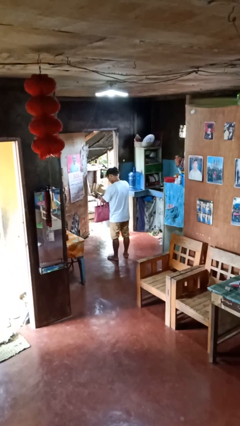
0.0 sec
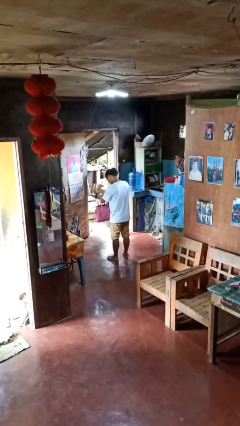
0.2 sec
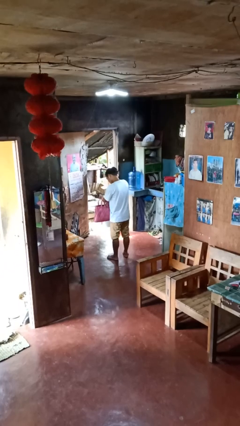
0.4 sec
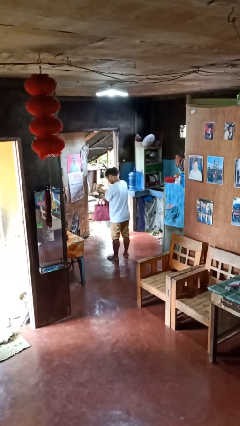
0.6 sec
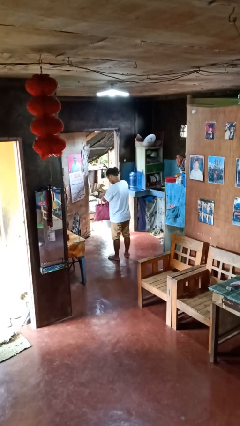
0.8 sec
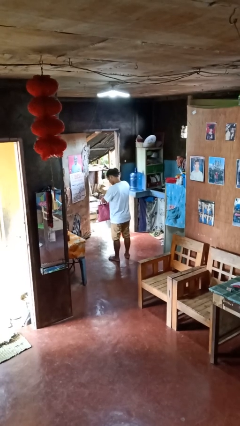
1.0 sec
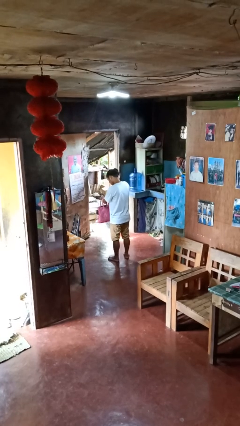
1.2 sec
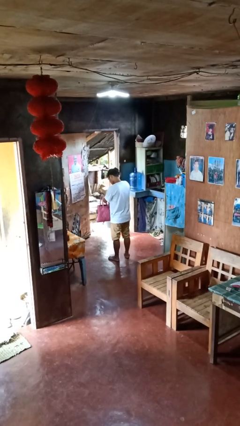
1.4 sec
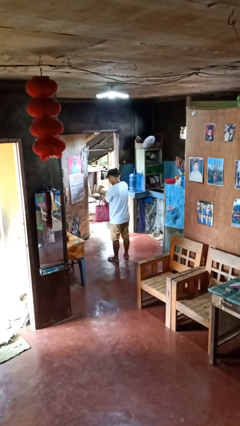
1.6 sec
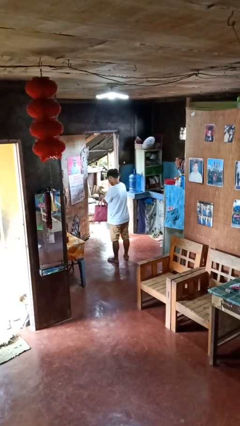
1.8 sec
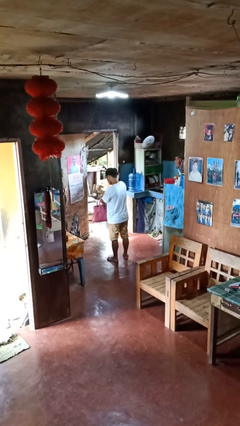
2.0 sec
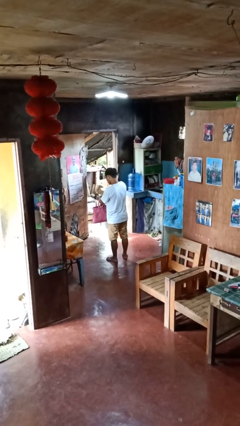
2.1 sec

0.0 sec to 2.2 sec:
person searches in purse

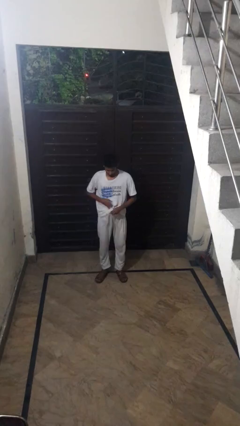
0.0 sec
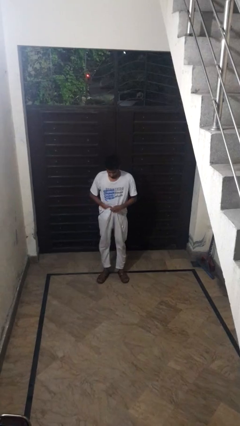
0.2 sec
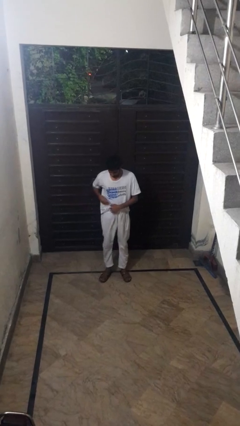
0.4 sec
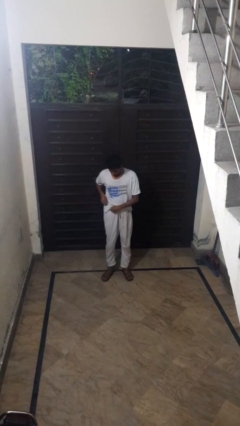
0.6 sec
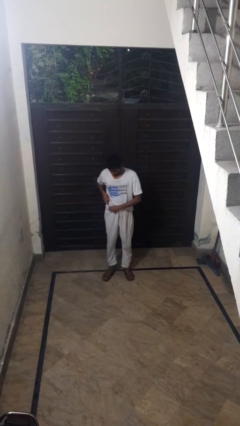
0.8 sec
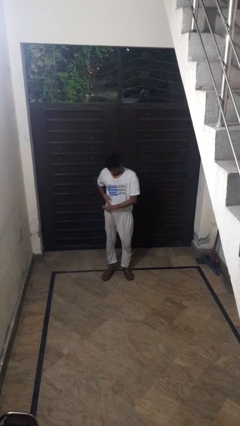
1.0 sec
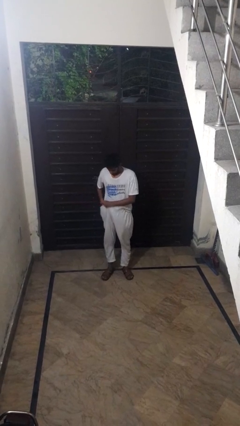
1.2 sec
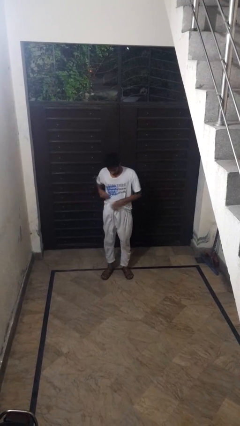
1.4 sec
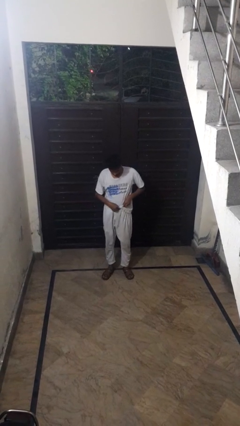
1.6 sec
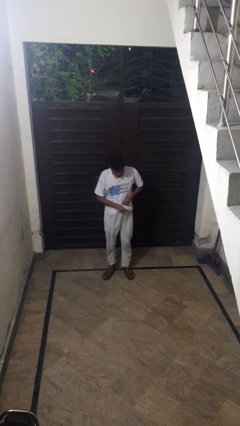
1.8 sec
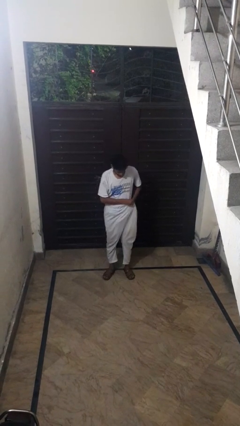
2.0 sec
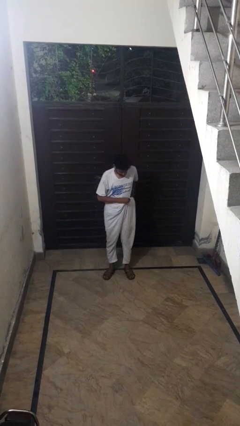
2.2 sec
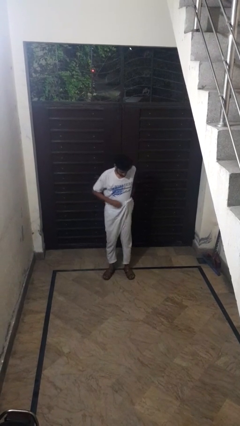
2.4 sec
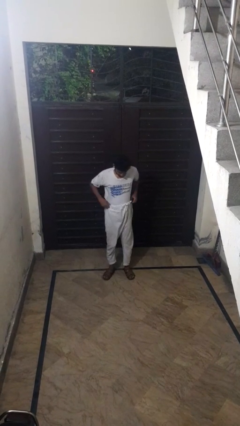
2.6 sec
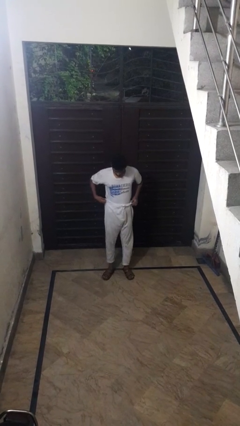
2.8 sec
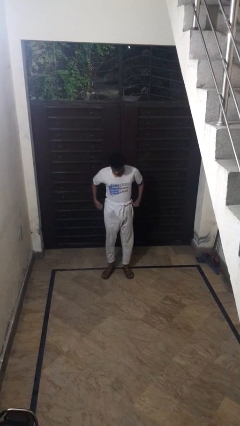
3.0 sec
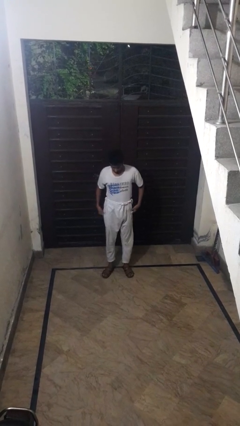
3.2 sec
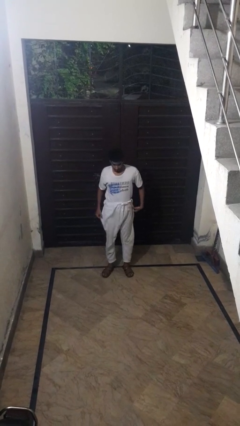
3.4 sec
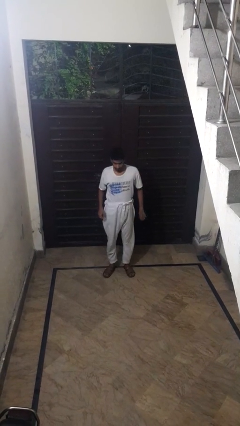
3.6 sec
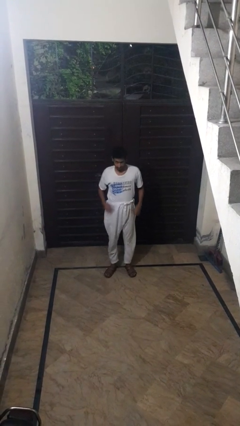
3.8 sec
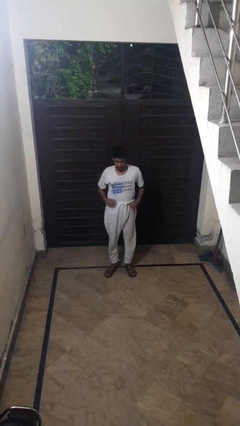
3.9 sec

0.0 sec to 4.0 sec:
person tucks in shirt

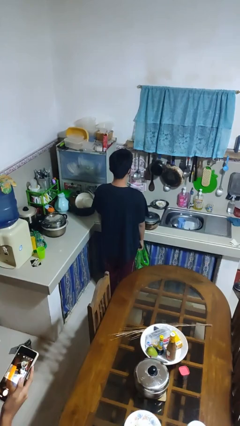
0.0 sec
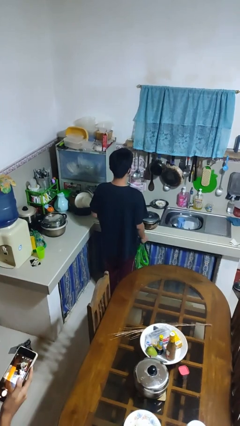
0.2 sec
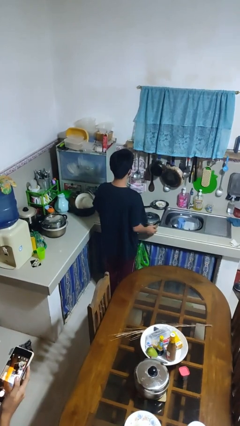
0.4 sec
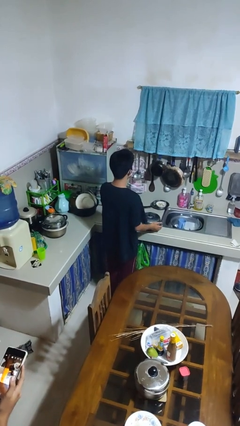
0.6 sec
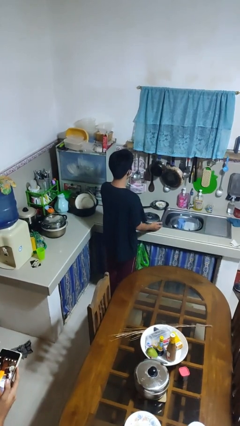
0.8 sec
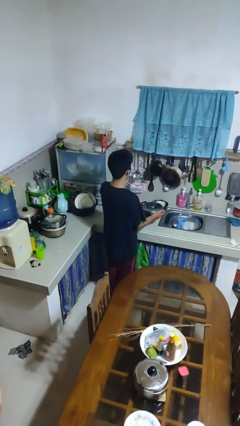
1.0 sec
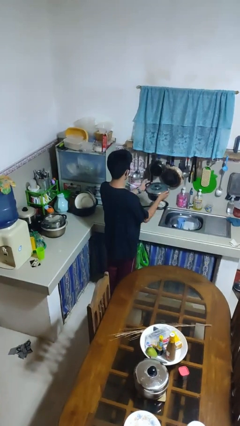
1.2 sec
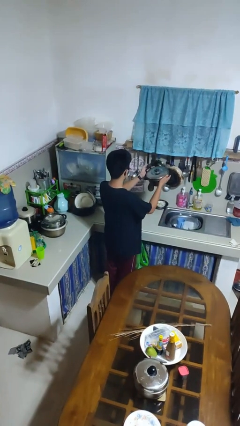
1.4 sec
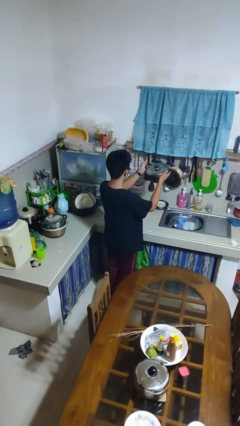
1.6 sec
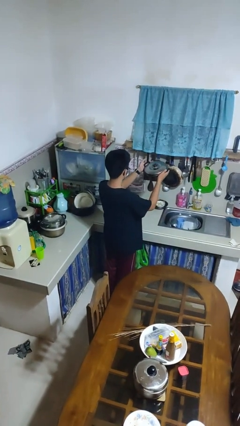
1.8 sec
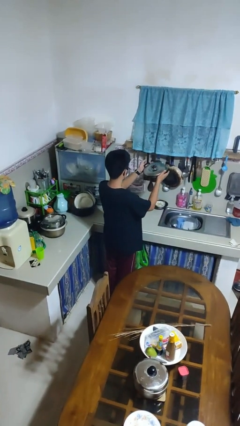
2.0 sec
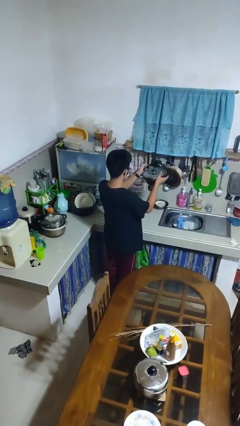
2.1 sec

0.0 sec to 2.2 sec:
person picks up object from countertop

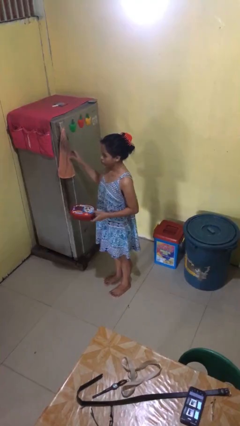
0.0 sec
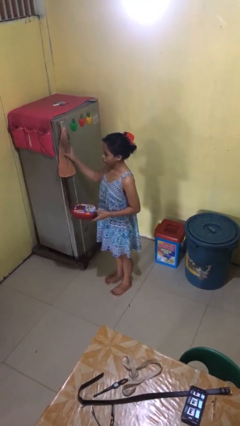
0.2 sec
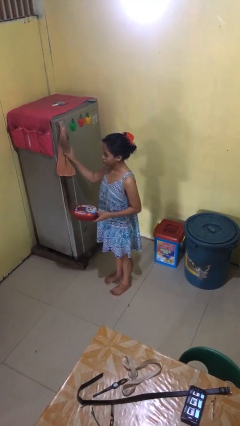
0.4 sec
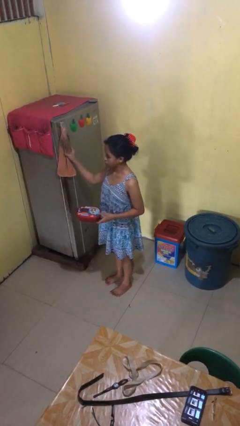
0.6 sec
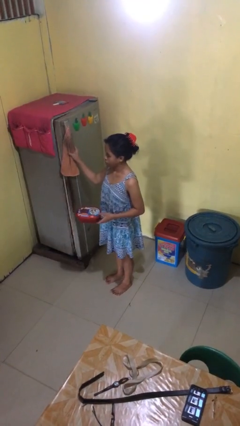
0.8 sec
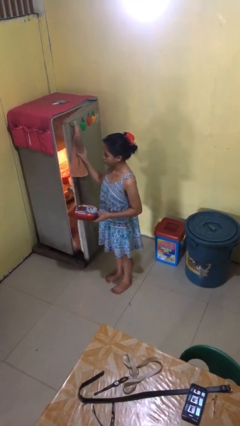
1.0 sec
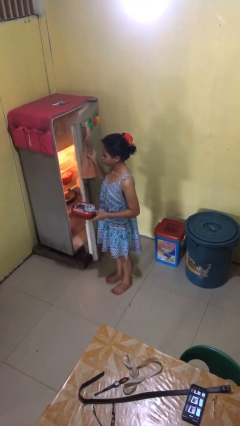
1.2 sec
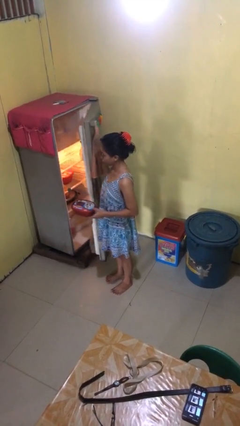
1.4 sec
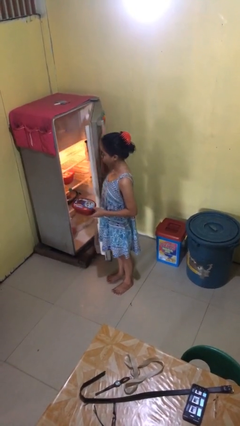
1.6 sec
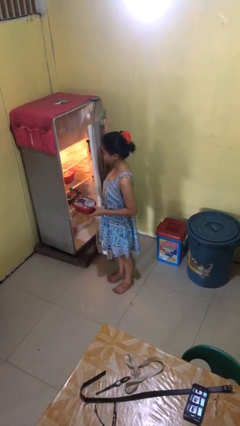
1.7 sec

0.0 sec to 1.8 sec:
person opens refrigerator

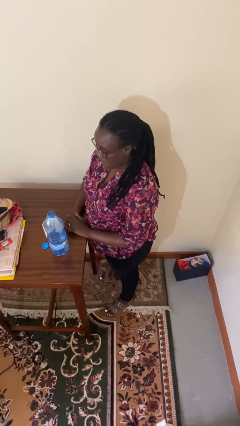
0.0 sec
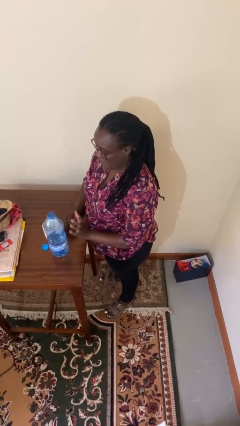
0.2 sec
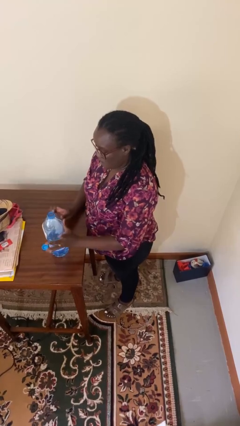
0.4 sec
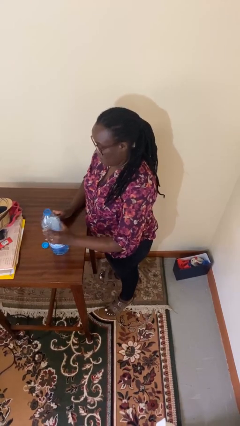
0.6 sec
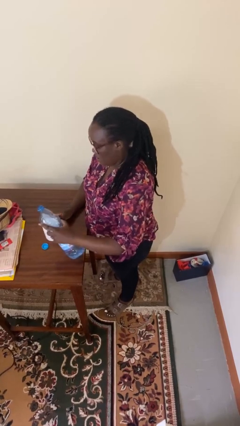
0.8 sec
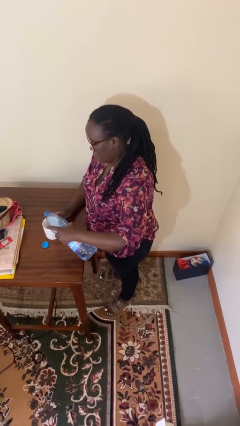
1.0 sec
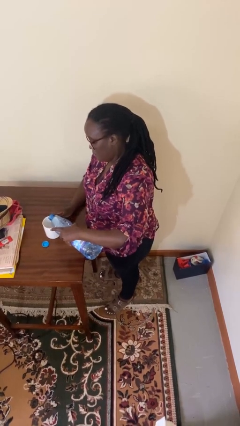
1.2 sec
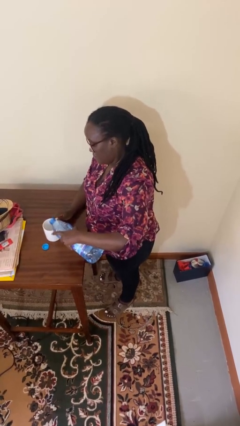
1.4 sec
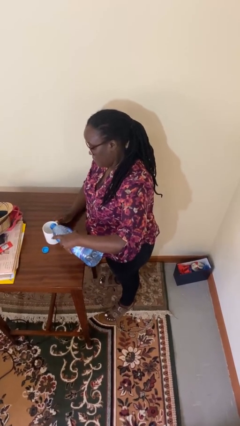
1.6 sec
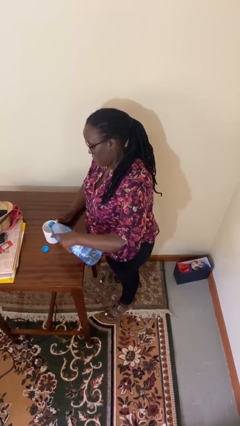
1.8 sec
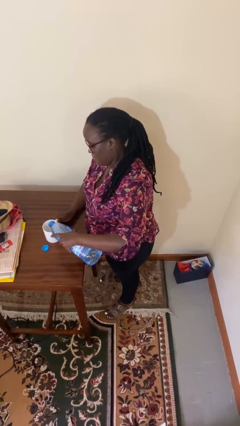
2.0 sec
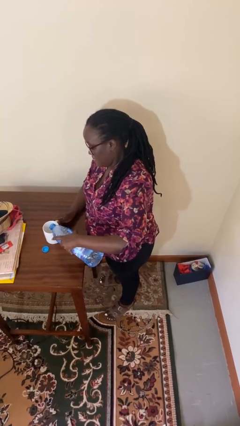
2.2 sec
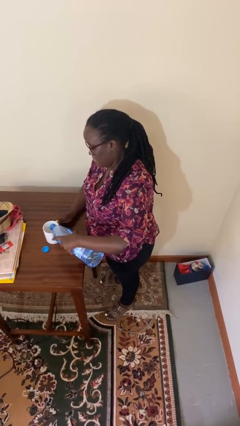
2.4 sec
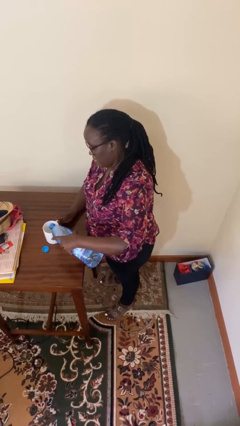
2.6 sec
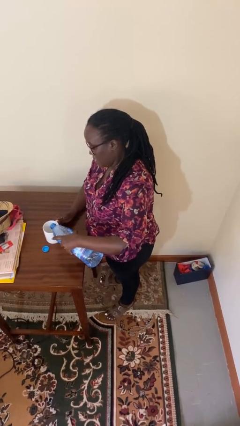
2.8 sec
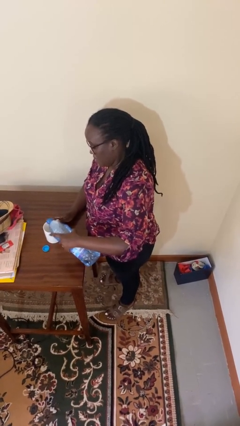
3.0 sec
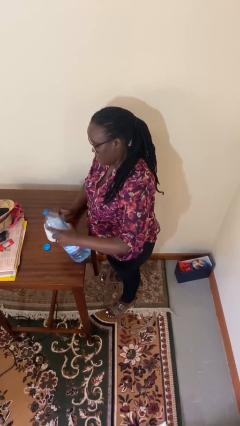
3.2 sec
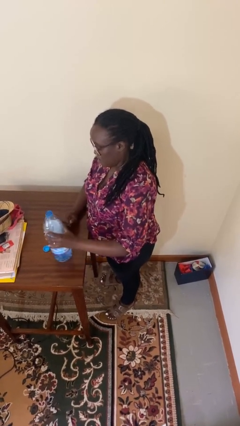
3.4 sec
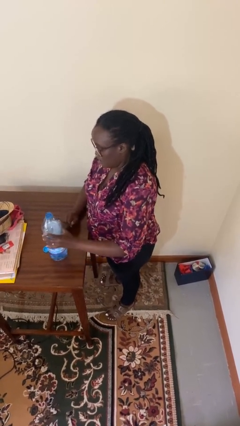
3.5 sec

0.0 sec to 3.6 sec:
person pours liquid into cup

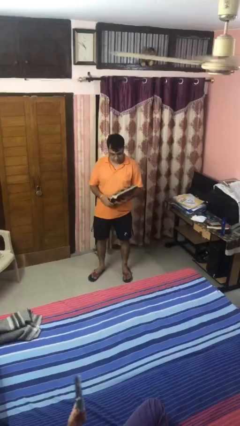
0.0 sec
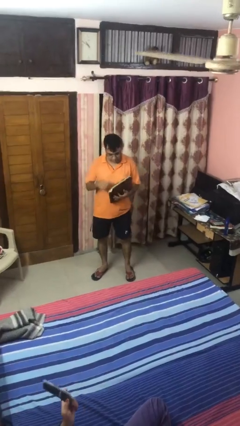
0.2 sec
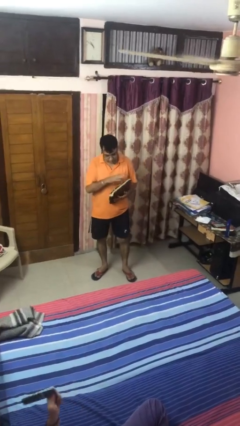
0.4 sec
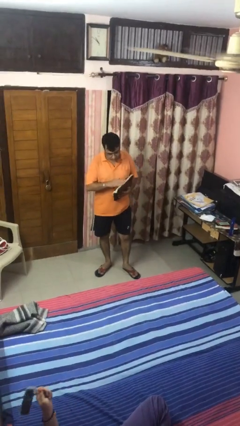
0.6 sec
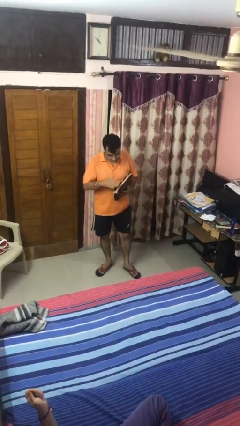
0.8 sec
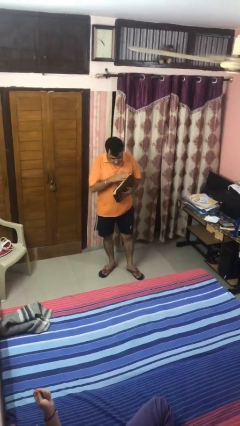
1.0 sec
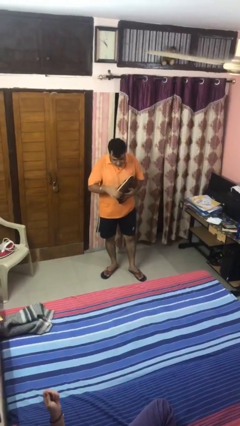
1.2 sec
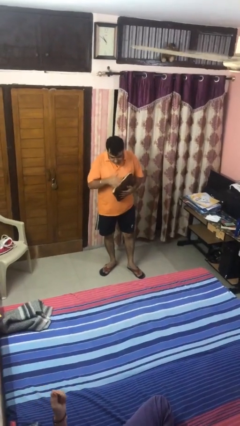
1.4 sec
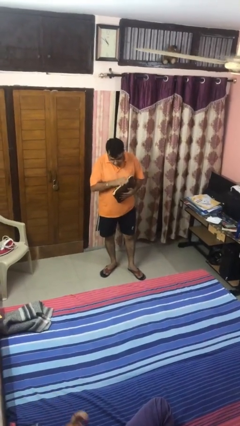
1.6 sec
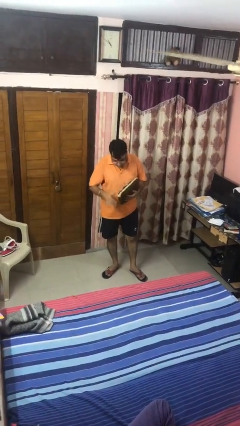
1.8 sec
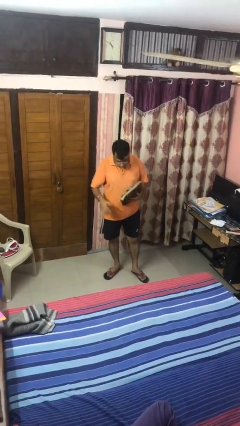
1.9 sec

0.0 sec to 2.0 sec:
person waves hand over object

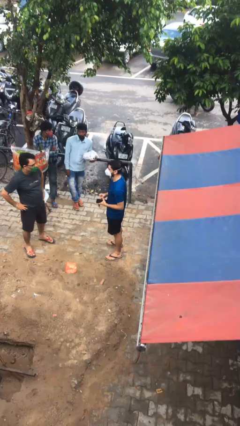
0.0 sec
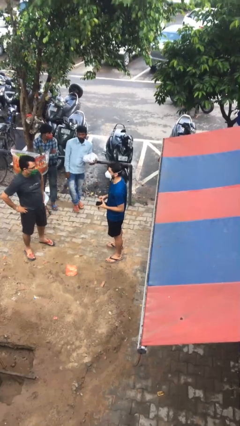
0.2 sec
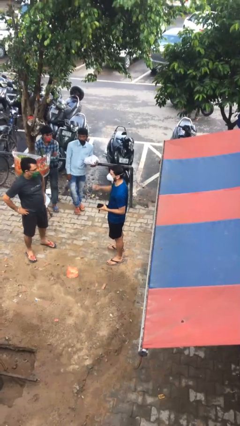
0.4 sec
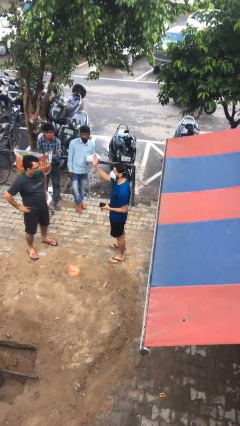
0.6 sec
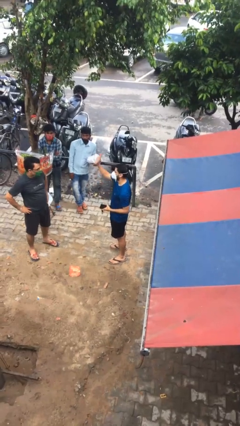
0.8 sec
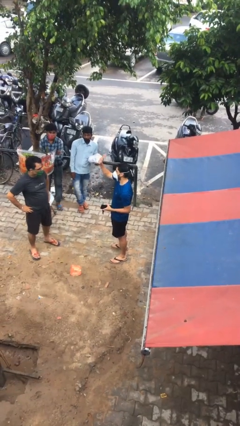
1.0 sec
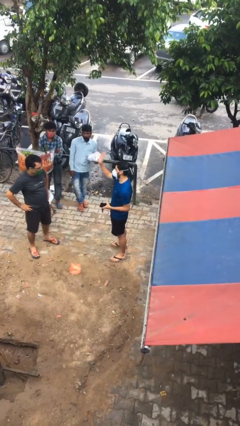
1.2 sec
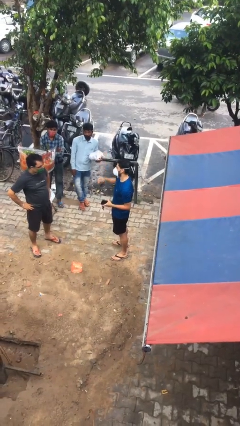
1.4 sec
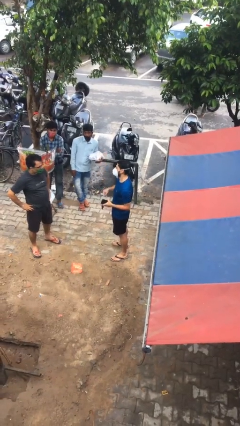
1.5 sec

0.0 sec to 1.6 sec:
person waves at person
